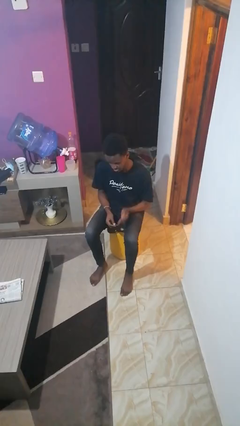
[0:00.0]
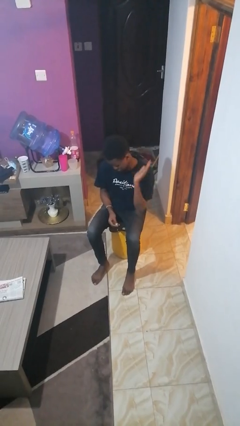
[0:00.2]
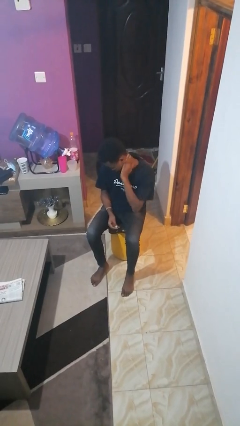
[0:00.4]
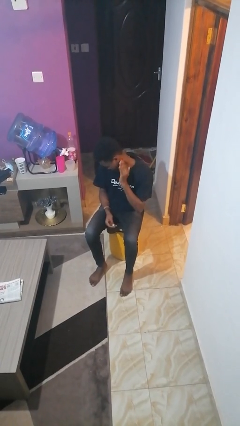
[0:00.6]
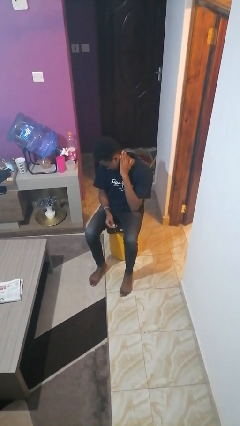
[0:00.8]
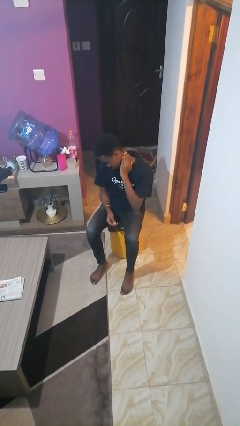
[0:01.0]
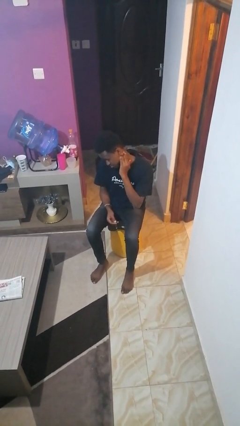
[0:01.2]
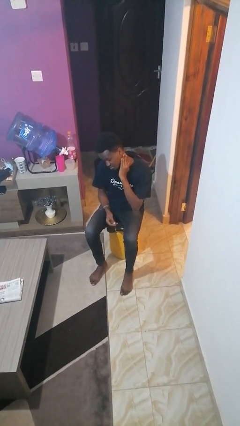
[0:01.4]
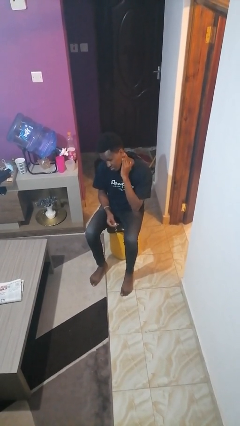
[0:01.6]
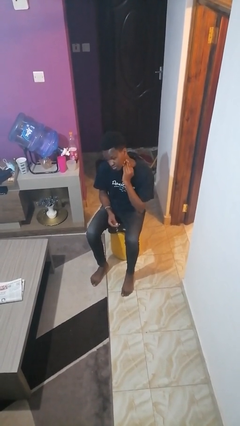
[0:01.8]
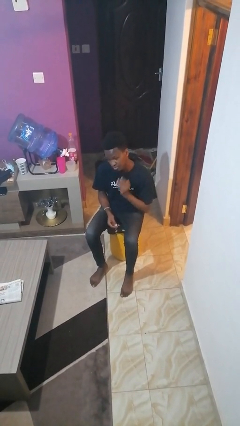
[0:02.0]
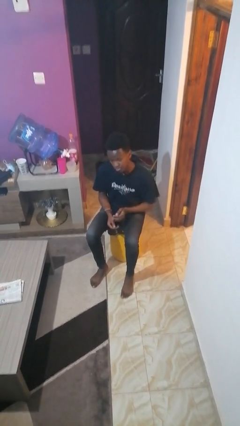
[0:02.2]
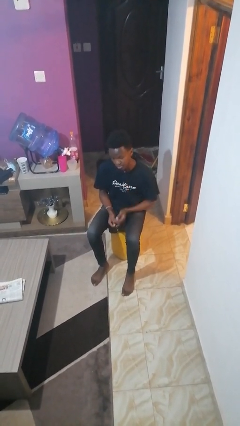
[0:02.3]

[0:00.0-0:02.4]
person swats bug

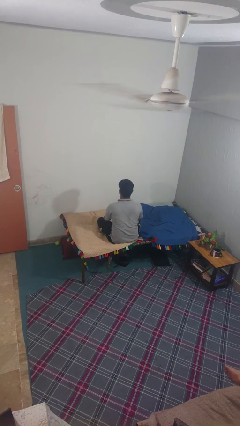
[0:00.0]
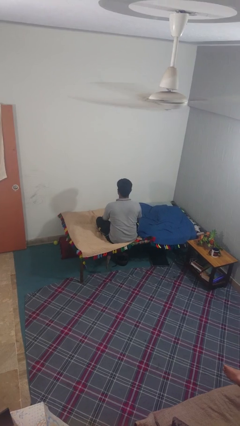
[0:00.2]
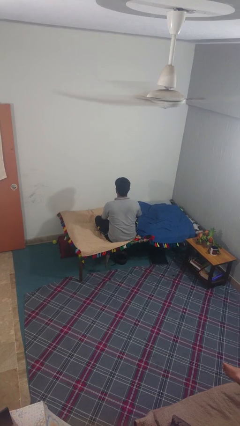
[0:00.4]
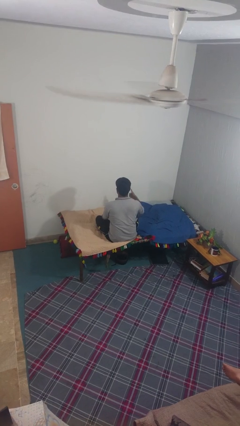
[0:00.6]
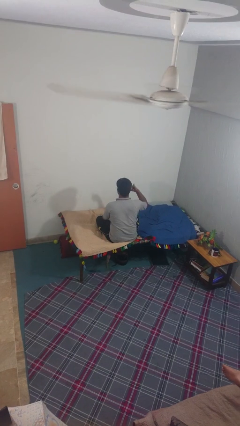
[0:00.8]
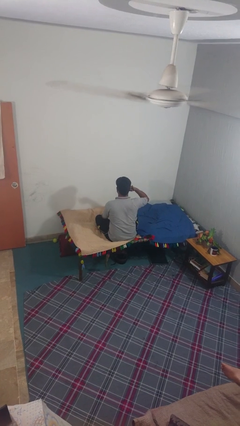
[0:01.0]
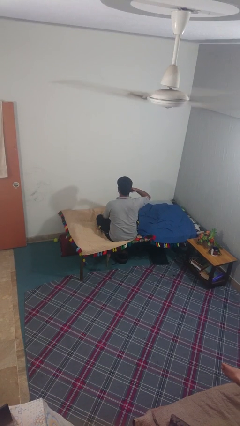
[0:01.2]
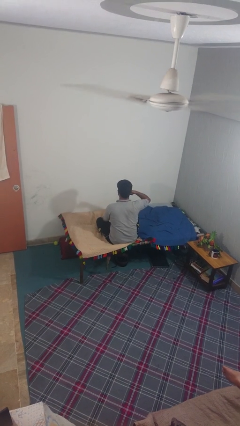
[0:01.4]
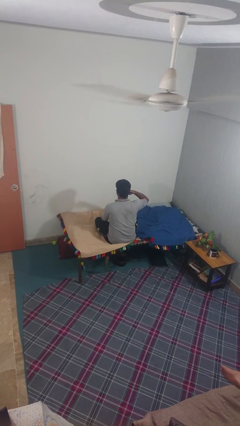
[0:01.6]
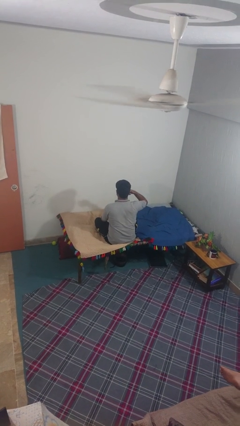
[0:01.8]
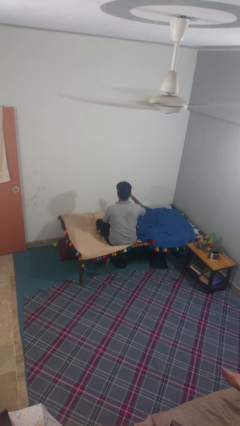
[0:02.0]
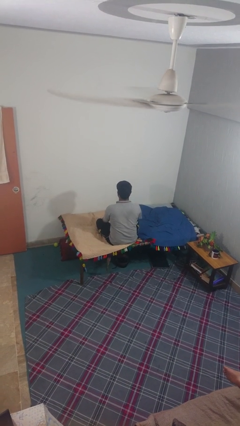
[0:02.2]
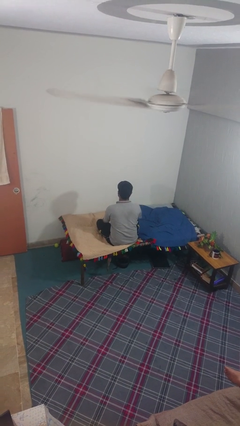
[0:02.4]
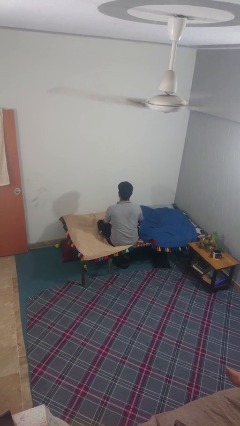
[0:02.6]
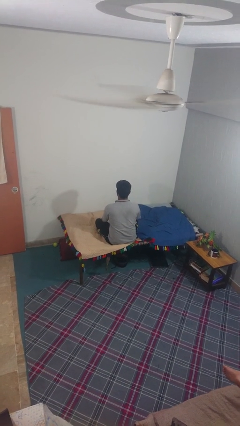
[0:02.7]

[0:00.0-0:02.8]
person gestures call me

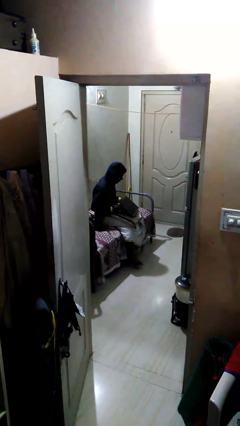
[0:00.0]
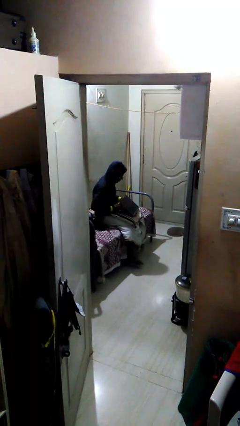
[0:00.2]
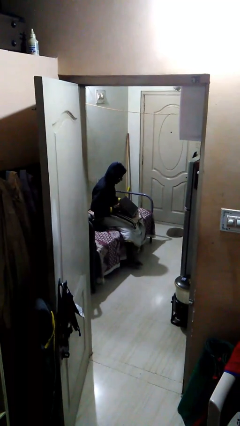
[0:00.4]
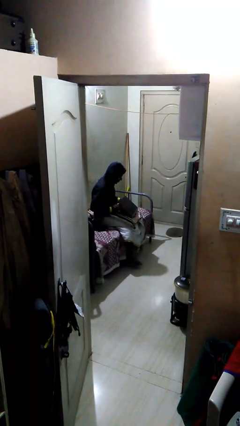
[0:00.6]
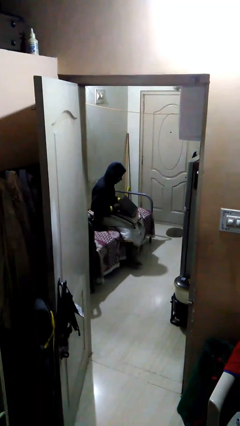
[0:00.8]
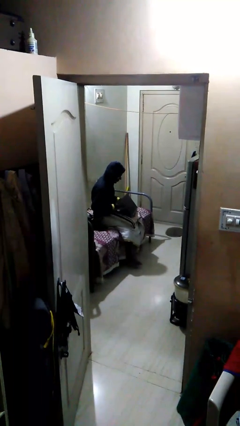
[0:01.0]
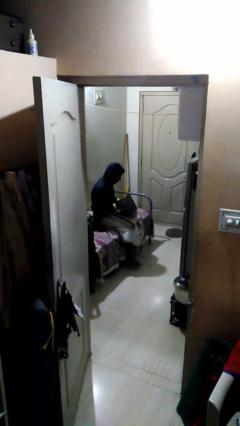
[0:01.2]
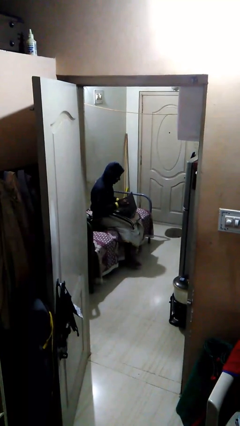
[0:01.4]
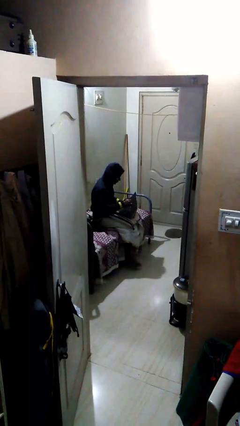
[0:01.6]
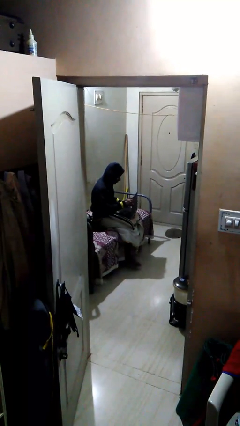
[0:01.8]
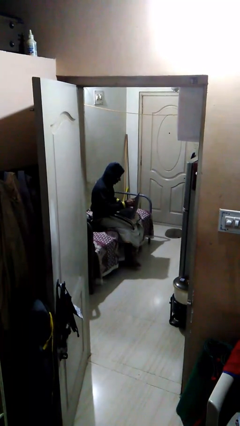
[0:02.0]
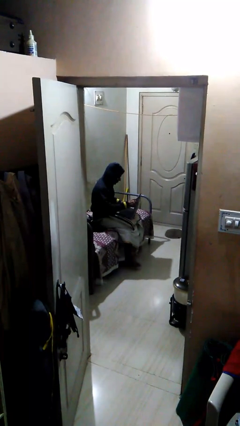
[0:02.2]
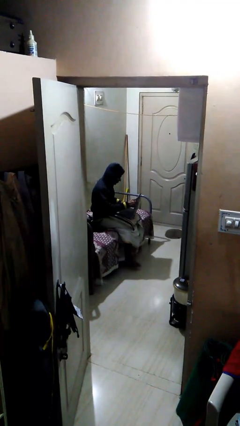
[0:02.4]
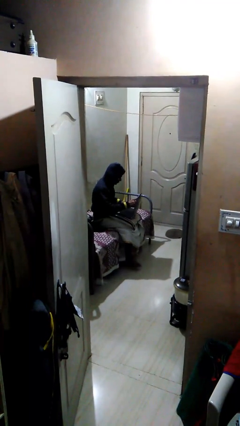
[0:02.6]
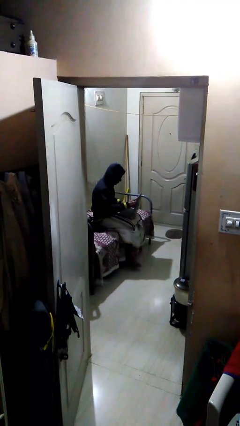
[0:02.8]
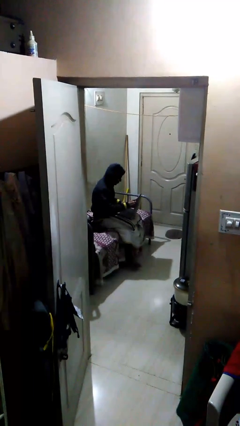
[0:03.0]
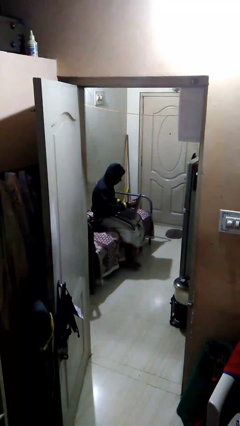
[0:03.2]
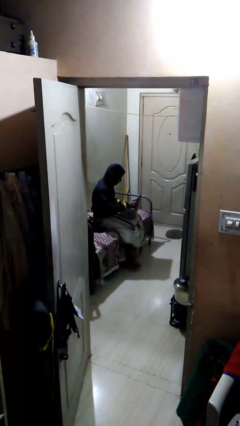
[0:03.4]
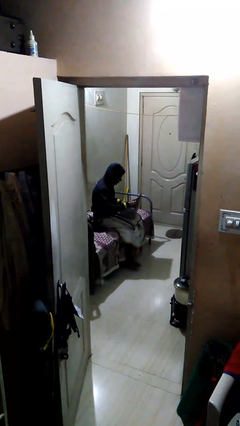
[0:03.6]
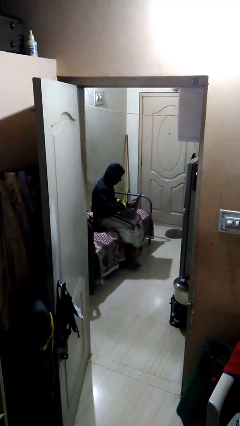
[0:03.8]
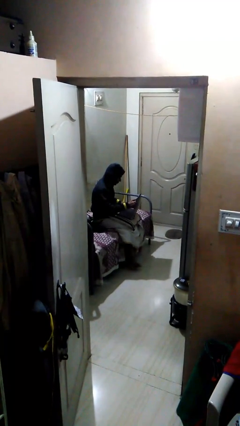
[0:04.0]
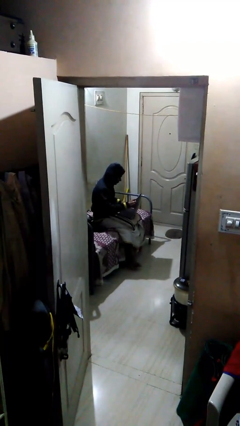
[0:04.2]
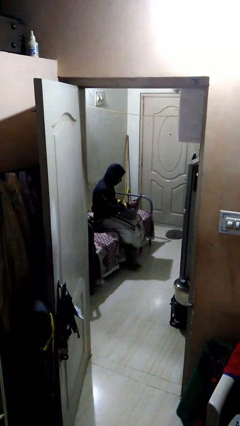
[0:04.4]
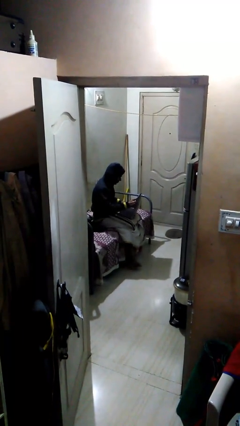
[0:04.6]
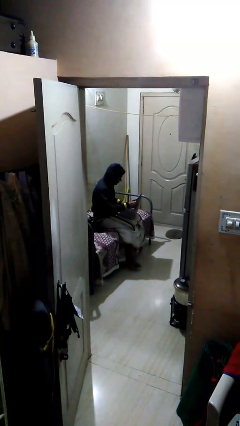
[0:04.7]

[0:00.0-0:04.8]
person interacts with laptop

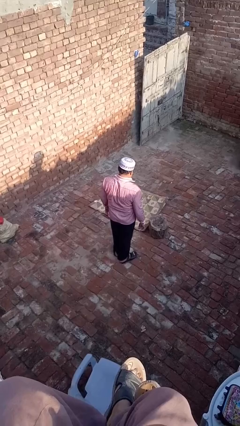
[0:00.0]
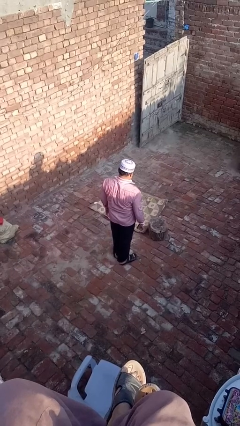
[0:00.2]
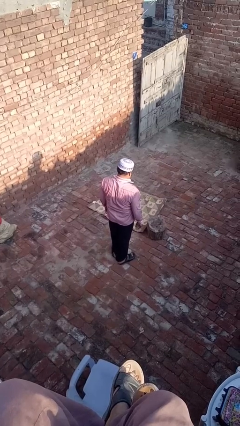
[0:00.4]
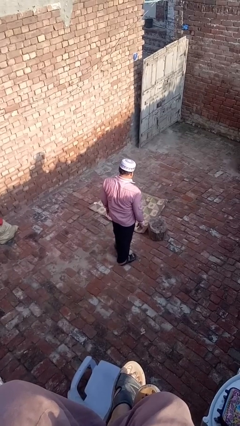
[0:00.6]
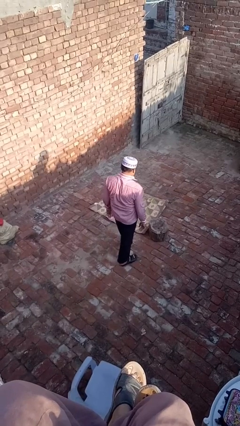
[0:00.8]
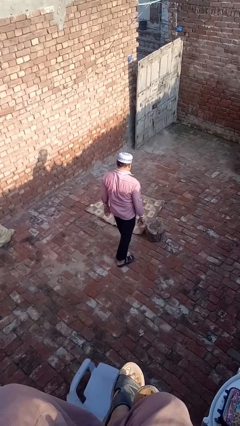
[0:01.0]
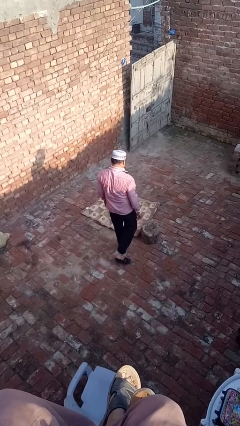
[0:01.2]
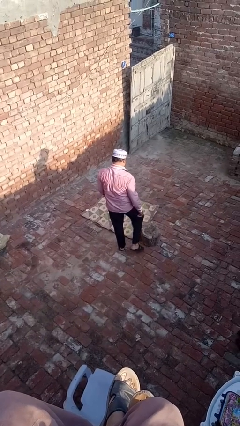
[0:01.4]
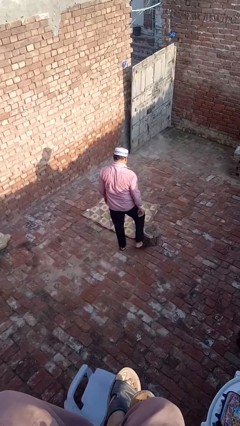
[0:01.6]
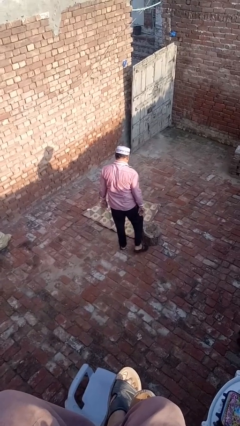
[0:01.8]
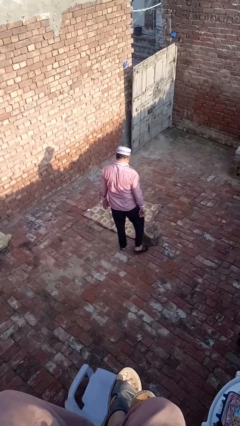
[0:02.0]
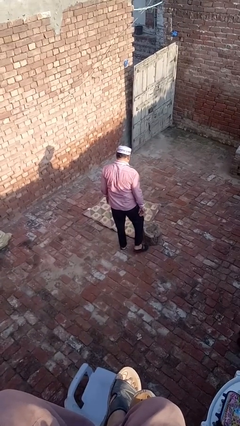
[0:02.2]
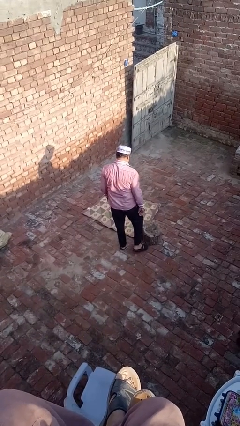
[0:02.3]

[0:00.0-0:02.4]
person trips on object on floor

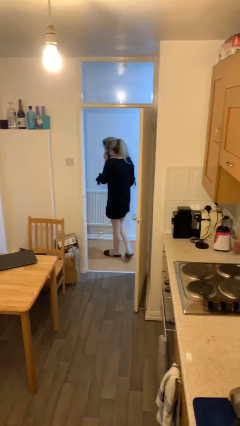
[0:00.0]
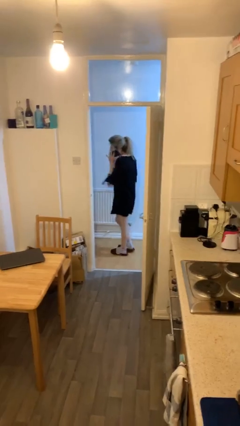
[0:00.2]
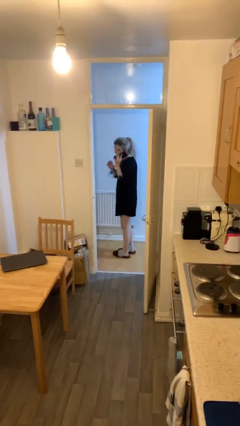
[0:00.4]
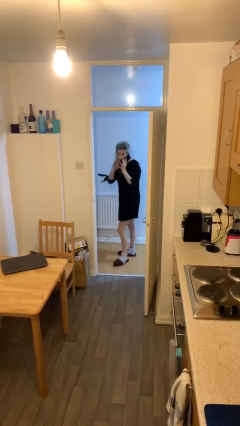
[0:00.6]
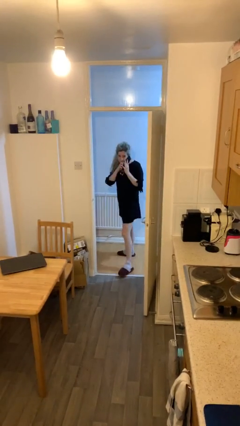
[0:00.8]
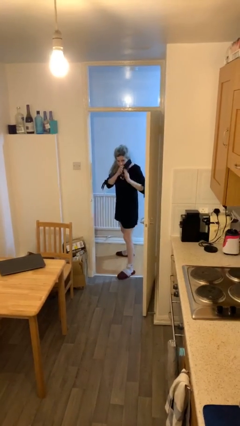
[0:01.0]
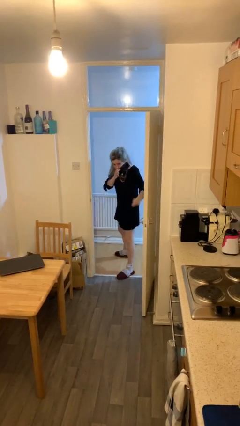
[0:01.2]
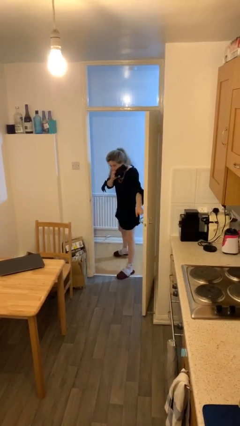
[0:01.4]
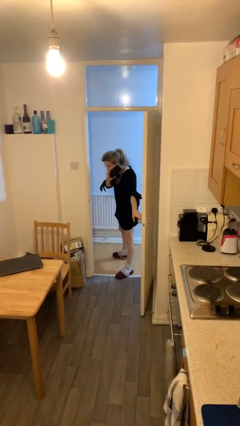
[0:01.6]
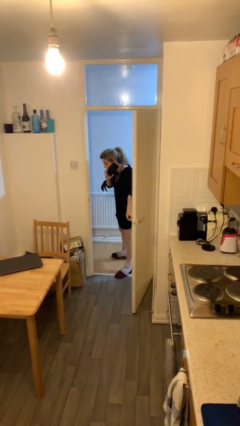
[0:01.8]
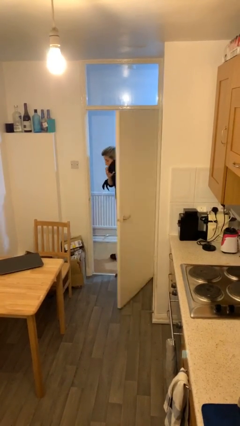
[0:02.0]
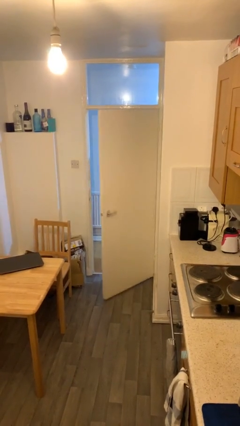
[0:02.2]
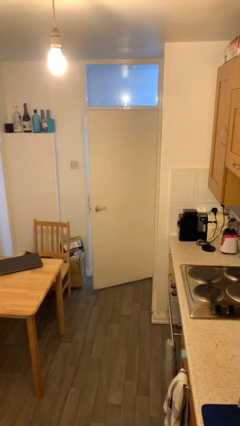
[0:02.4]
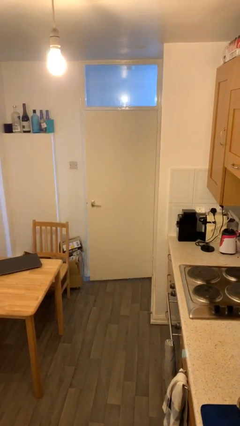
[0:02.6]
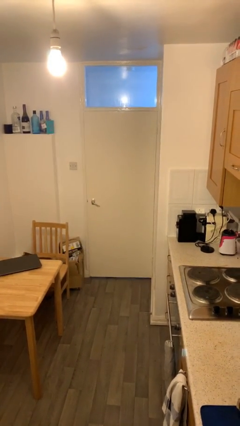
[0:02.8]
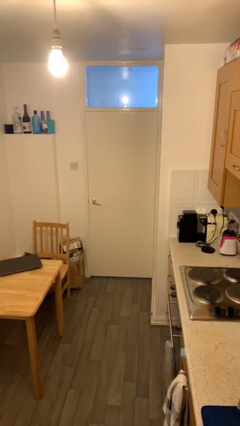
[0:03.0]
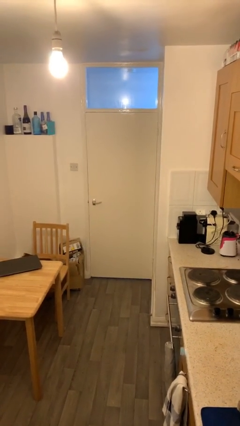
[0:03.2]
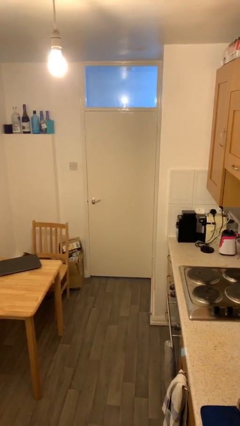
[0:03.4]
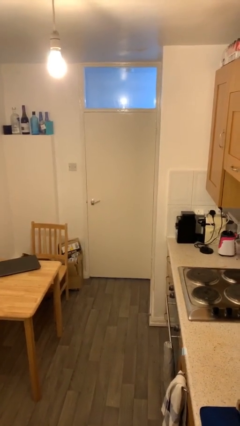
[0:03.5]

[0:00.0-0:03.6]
person closes facility door

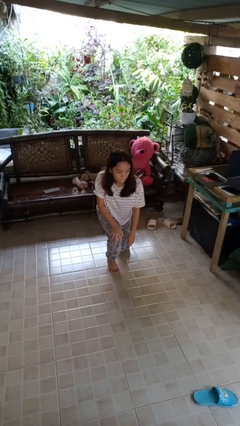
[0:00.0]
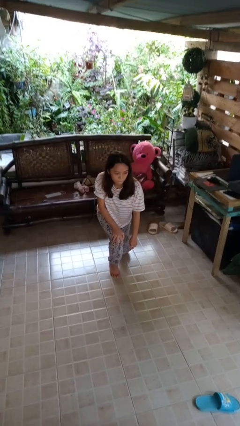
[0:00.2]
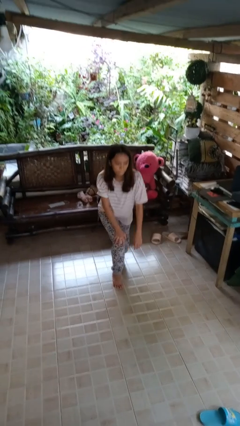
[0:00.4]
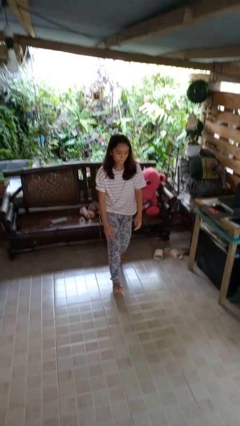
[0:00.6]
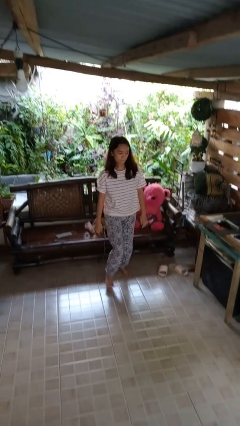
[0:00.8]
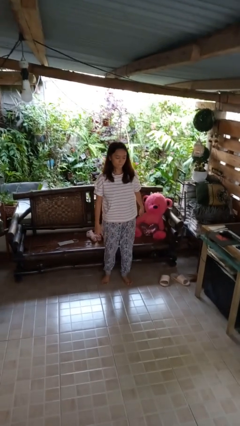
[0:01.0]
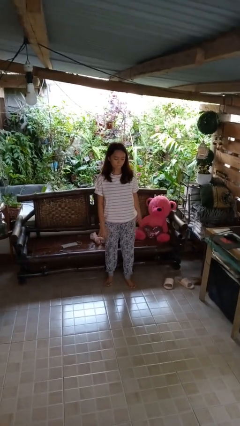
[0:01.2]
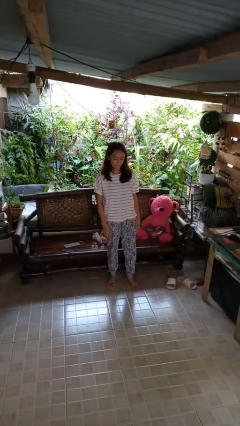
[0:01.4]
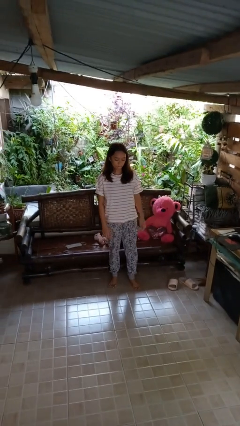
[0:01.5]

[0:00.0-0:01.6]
person stands up from floor
